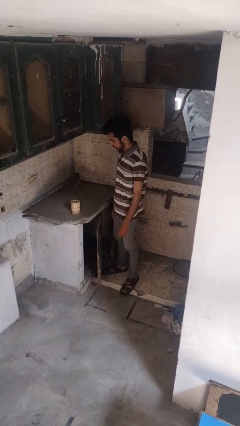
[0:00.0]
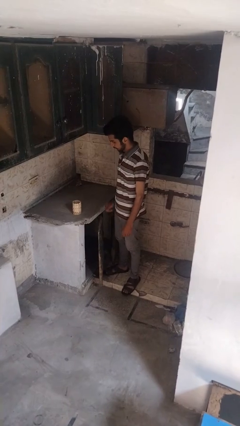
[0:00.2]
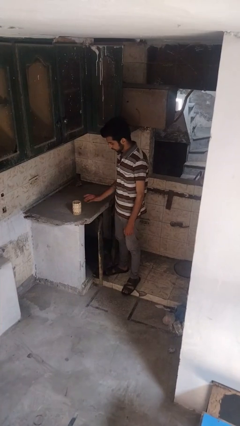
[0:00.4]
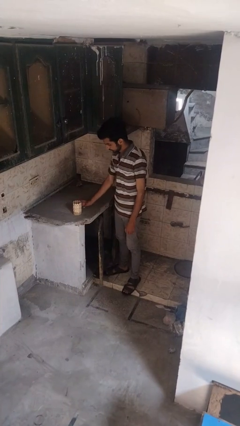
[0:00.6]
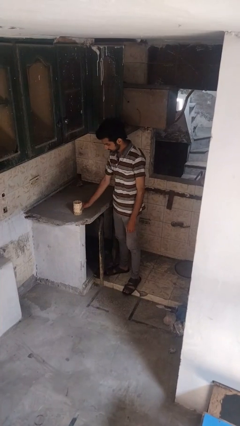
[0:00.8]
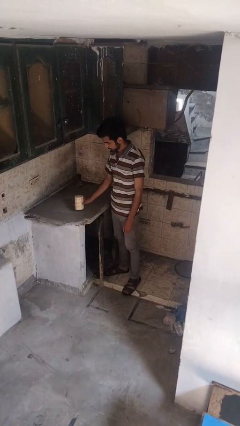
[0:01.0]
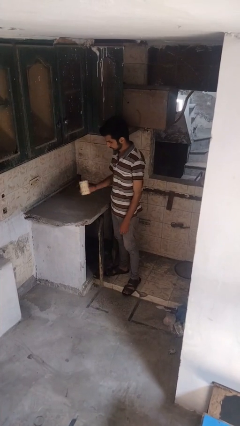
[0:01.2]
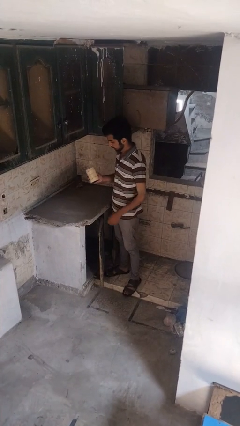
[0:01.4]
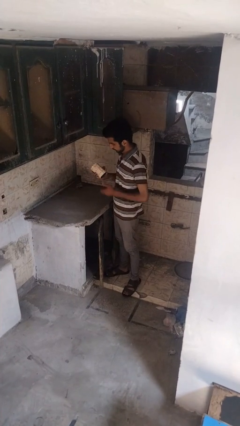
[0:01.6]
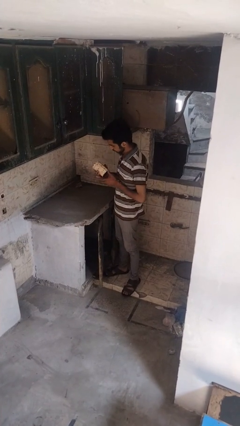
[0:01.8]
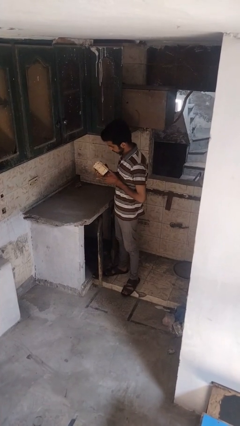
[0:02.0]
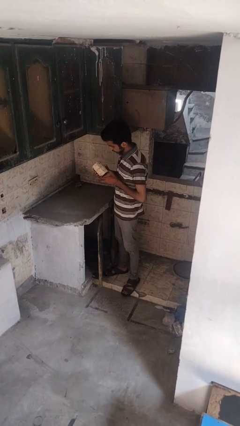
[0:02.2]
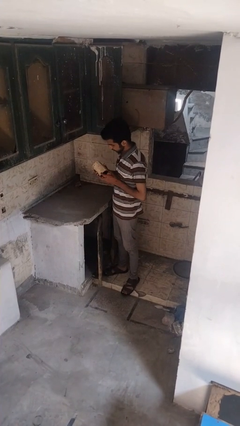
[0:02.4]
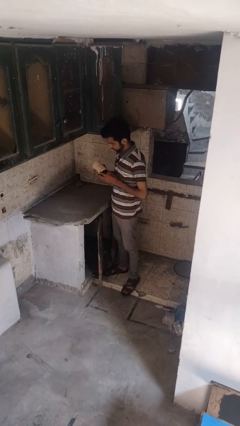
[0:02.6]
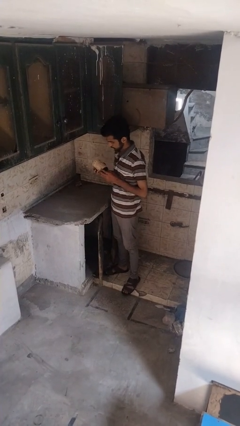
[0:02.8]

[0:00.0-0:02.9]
person picks up object from countertop

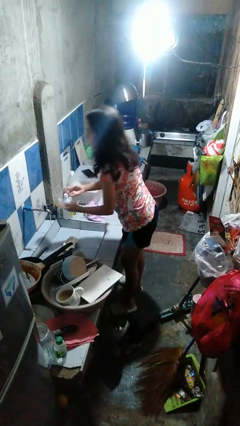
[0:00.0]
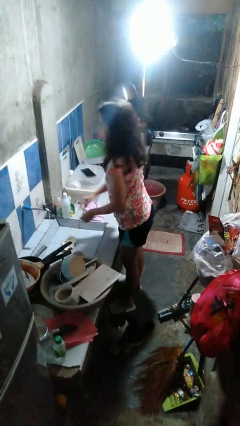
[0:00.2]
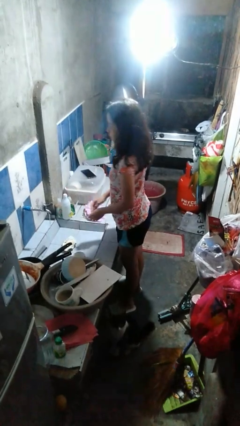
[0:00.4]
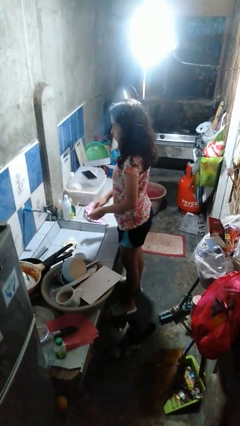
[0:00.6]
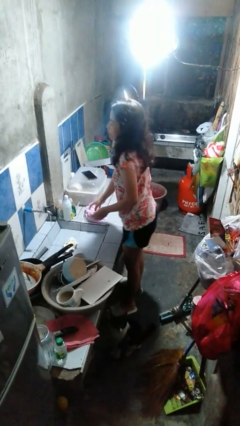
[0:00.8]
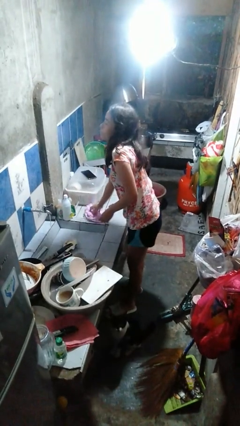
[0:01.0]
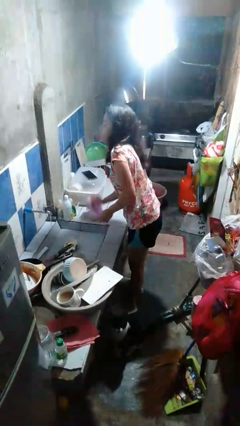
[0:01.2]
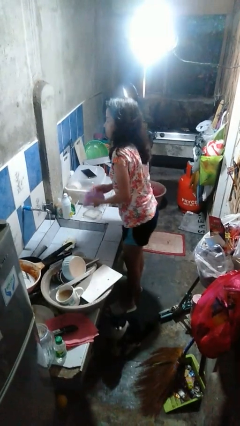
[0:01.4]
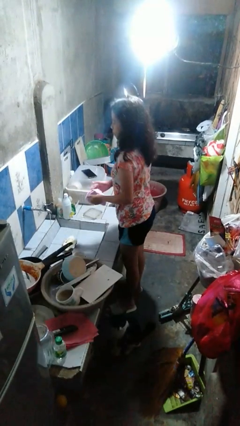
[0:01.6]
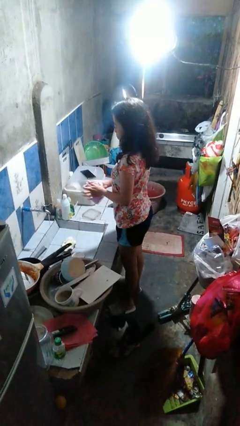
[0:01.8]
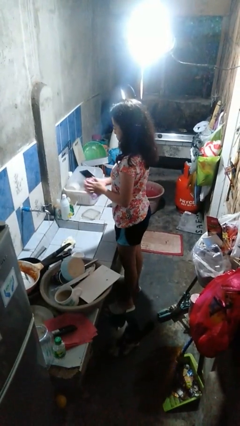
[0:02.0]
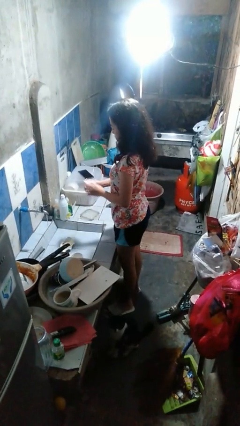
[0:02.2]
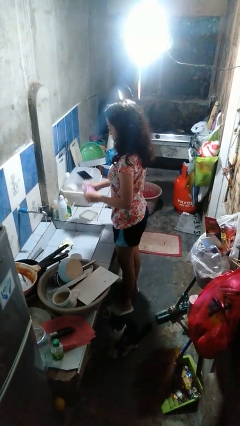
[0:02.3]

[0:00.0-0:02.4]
person dries hands with towel

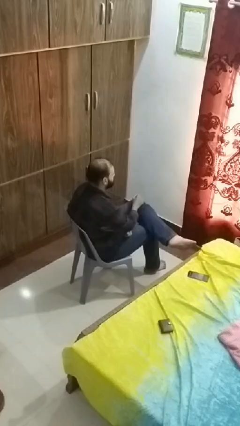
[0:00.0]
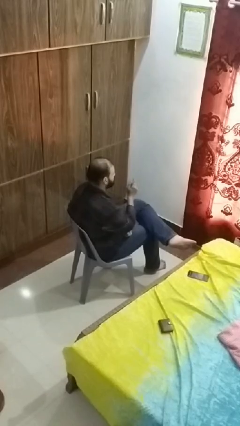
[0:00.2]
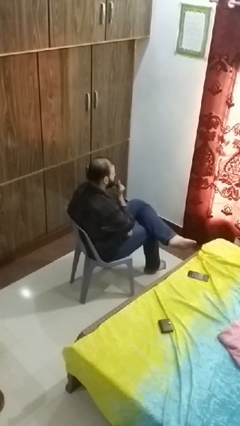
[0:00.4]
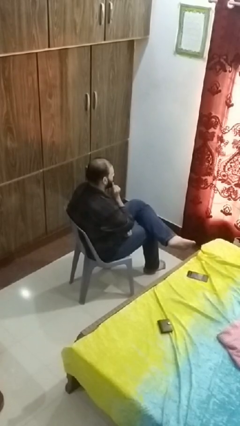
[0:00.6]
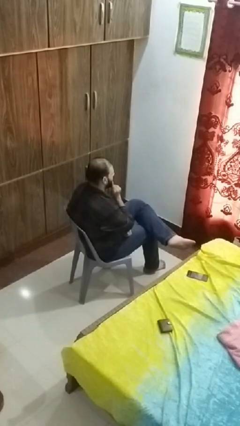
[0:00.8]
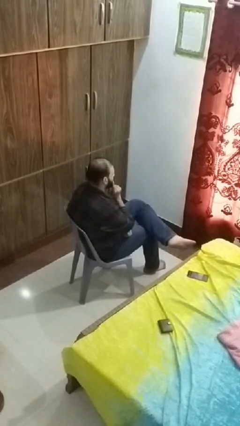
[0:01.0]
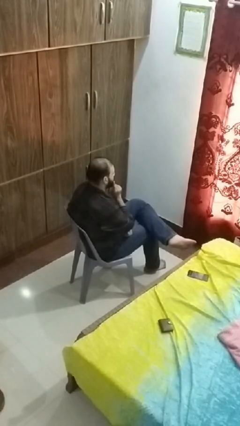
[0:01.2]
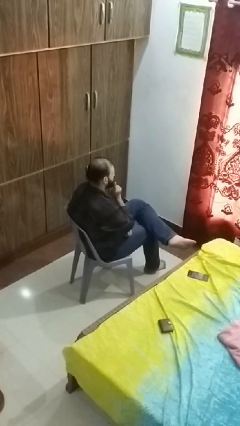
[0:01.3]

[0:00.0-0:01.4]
person strokes chin

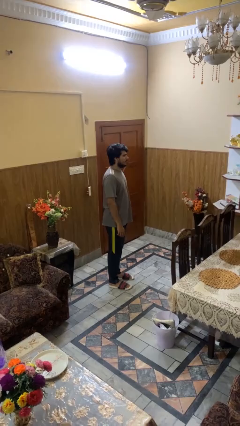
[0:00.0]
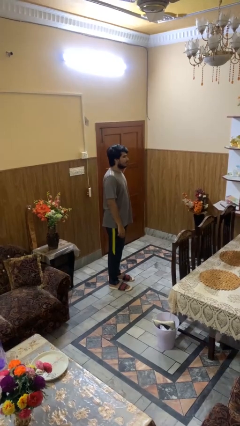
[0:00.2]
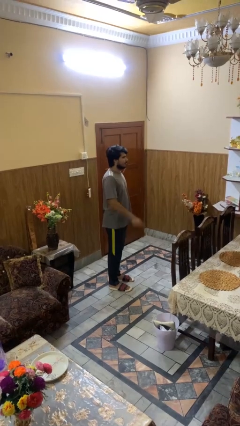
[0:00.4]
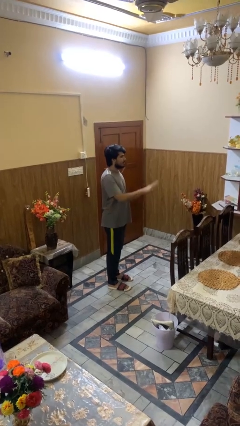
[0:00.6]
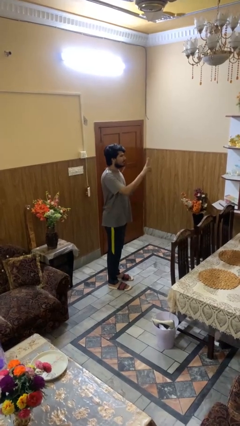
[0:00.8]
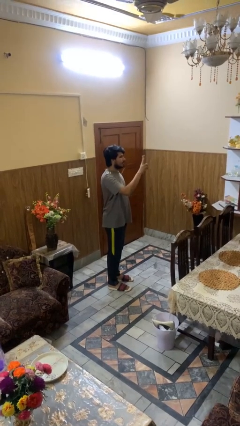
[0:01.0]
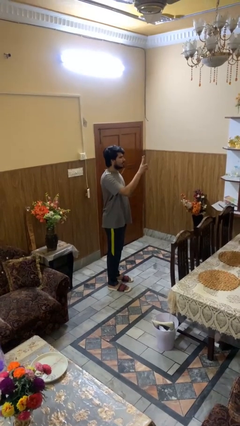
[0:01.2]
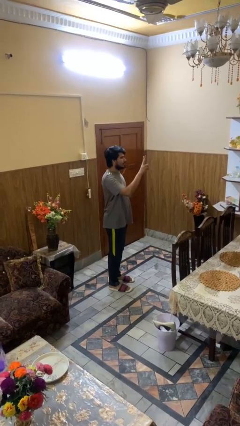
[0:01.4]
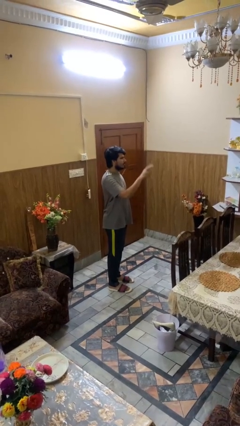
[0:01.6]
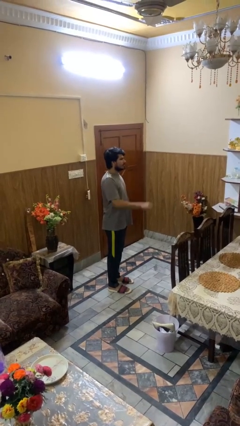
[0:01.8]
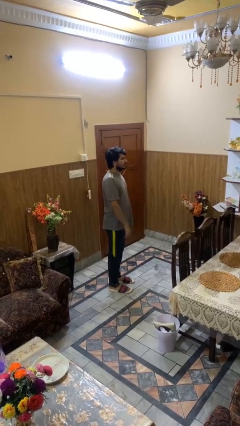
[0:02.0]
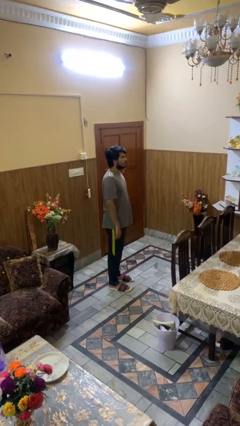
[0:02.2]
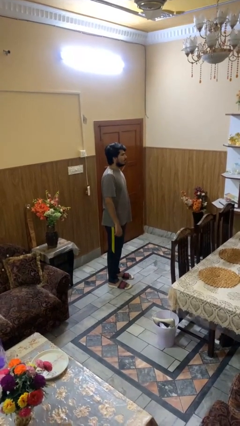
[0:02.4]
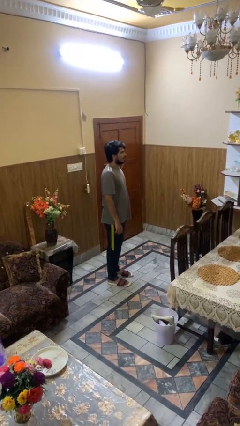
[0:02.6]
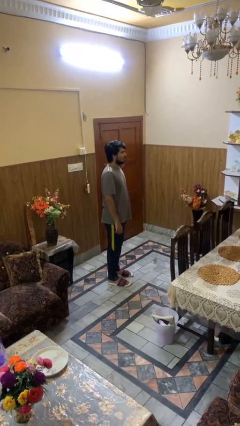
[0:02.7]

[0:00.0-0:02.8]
person gestures peace

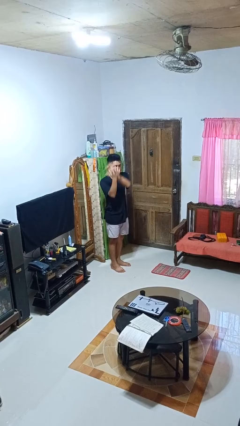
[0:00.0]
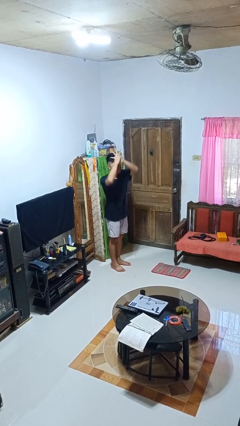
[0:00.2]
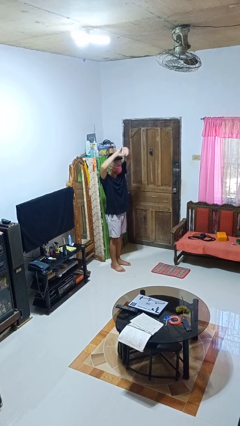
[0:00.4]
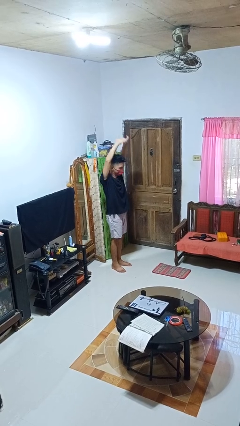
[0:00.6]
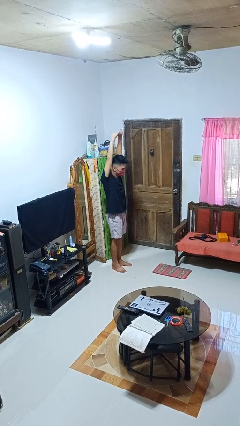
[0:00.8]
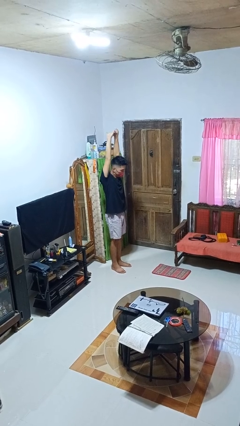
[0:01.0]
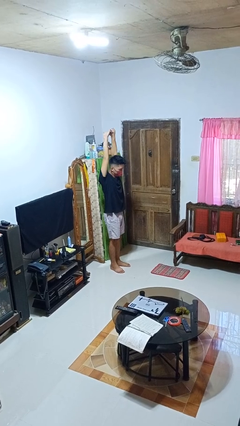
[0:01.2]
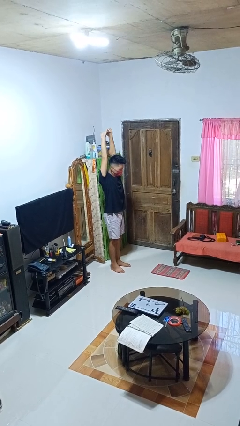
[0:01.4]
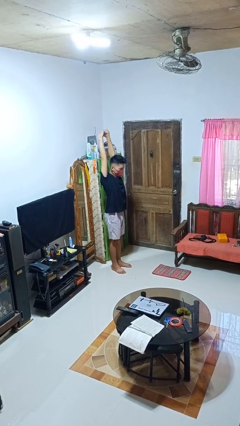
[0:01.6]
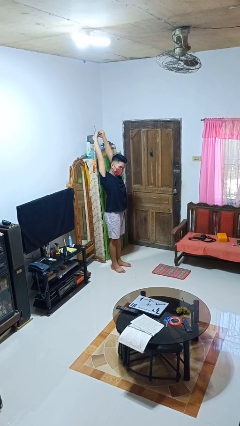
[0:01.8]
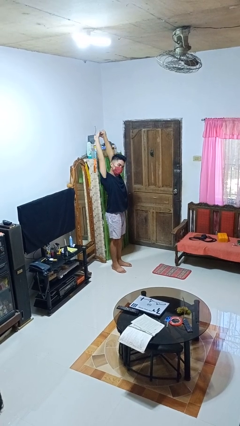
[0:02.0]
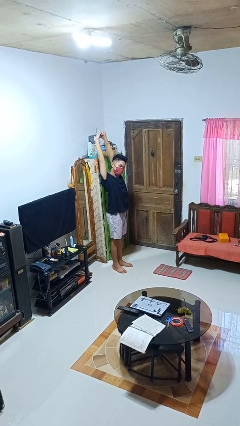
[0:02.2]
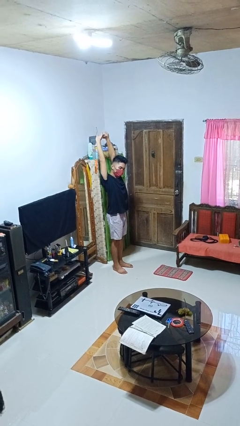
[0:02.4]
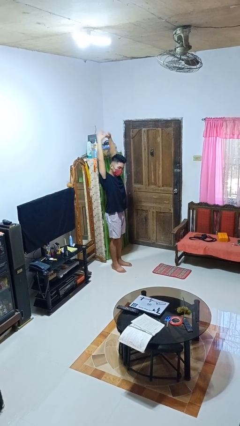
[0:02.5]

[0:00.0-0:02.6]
person stretches arms over head

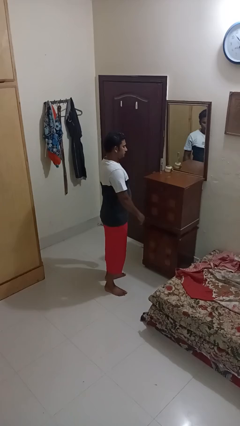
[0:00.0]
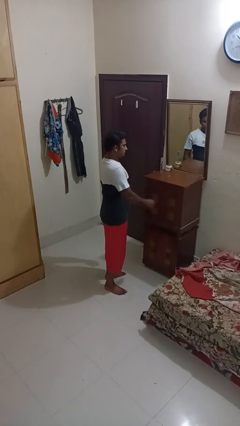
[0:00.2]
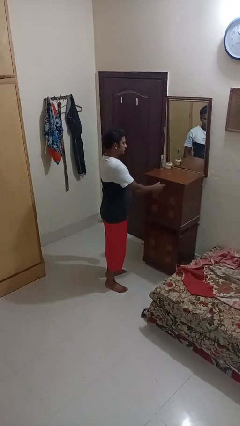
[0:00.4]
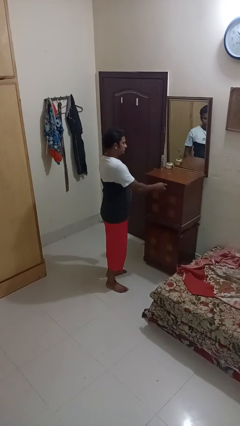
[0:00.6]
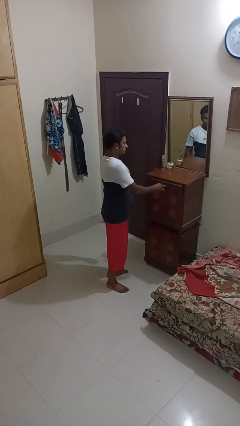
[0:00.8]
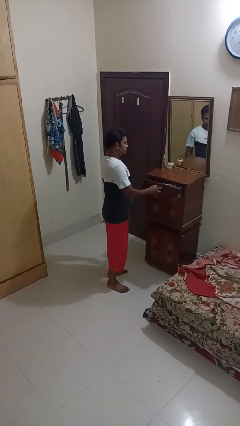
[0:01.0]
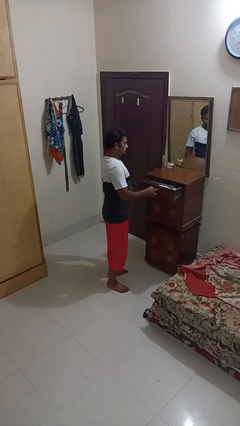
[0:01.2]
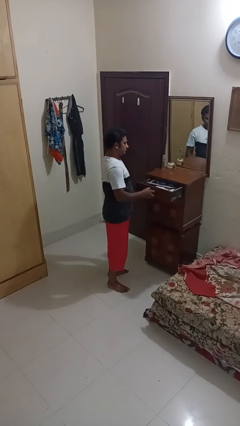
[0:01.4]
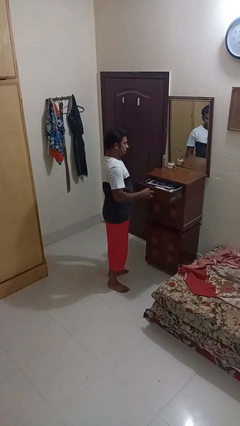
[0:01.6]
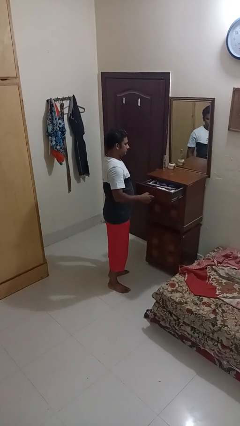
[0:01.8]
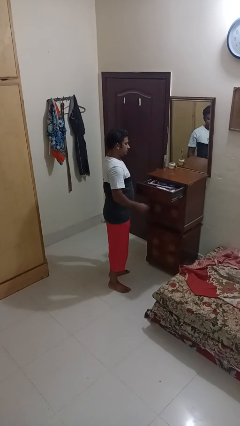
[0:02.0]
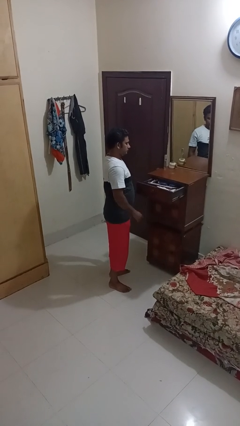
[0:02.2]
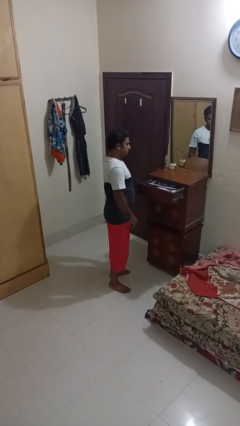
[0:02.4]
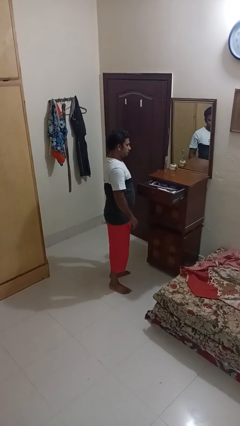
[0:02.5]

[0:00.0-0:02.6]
person opens dresser drawer

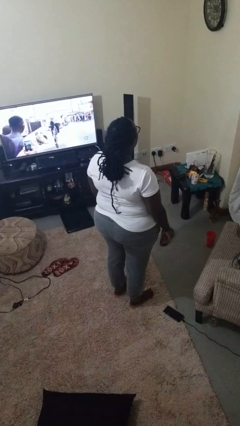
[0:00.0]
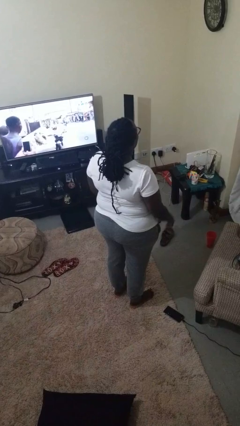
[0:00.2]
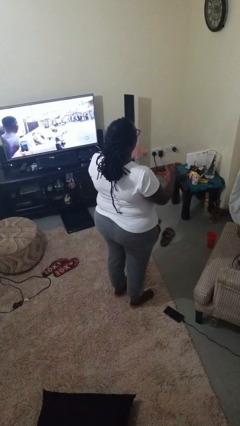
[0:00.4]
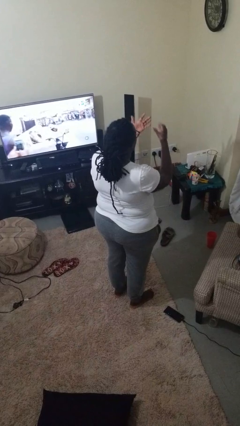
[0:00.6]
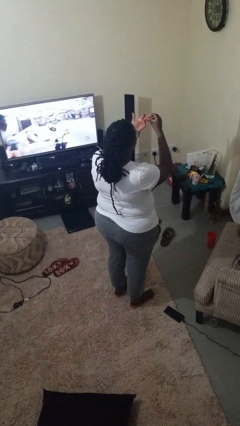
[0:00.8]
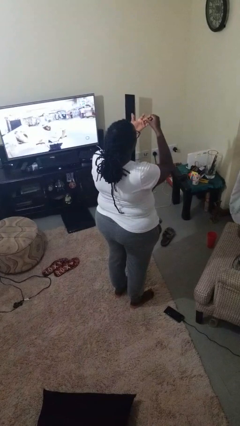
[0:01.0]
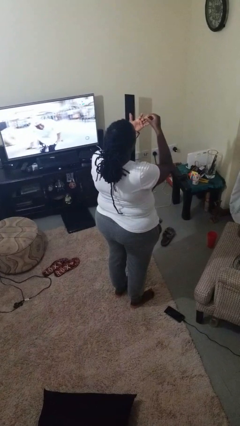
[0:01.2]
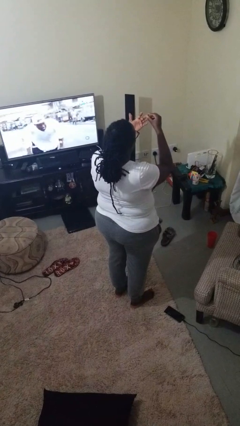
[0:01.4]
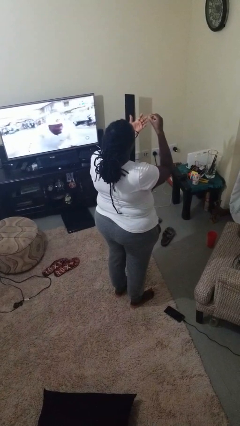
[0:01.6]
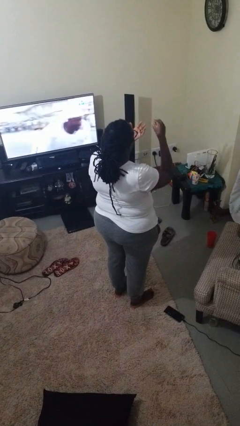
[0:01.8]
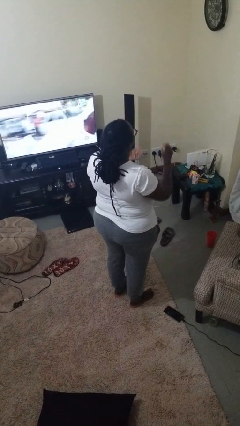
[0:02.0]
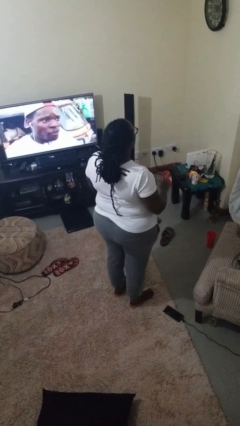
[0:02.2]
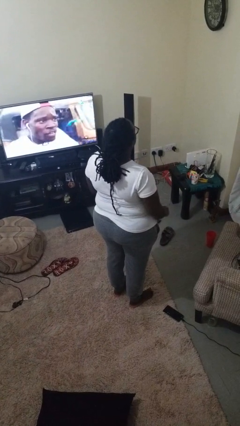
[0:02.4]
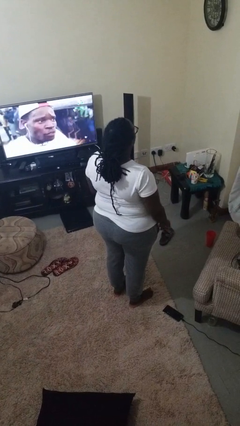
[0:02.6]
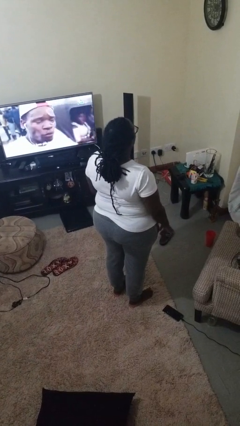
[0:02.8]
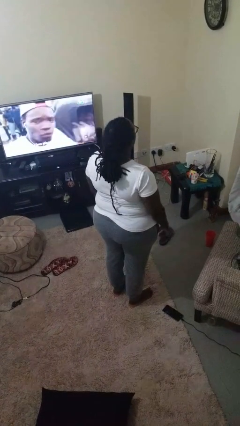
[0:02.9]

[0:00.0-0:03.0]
person takes off ring
